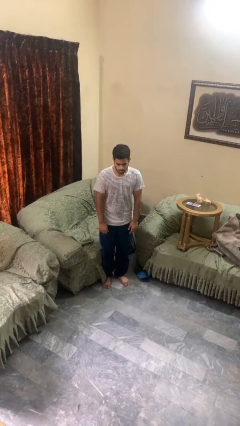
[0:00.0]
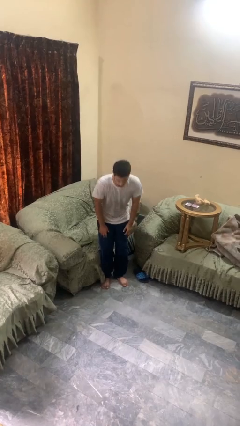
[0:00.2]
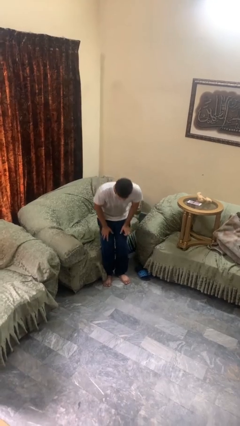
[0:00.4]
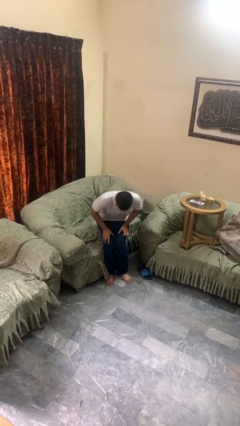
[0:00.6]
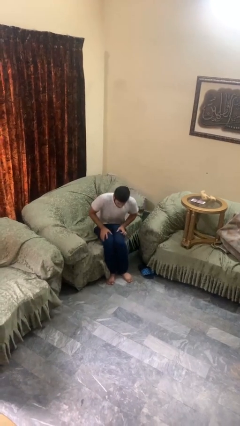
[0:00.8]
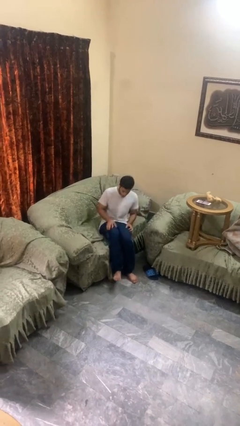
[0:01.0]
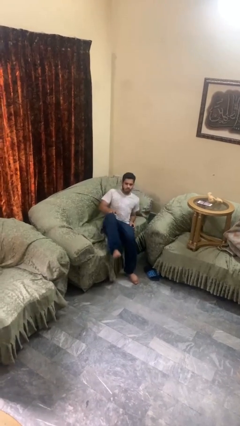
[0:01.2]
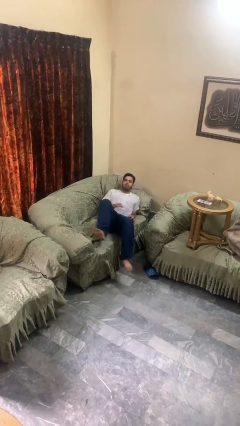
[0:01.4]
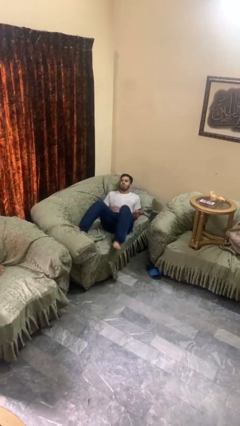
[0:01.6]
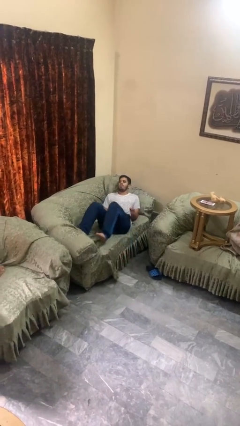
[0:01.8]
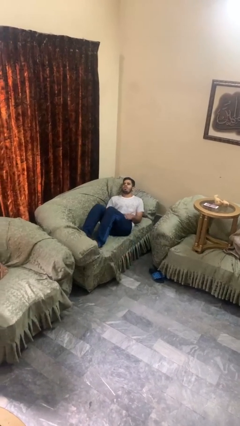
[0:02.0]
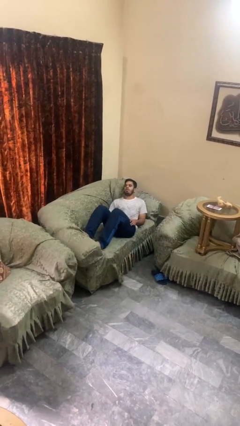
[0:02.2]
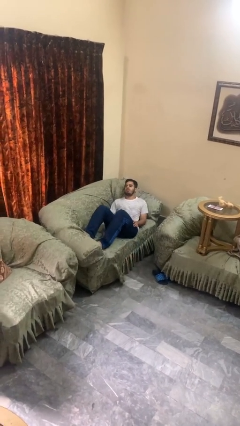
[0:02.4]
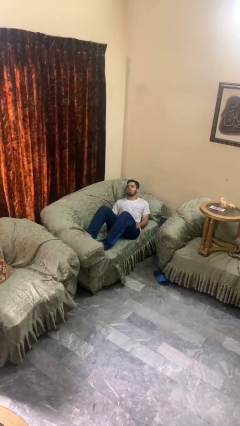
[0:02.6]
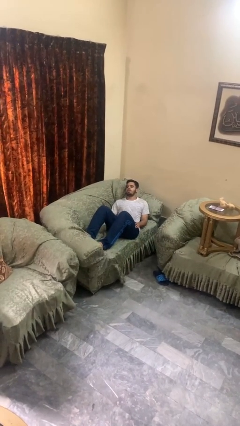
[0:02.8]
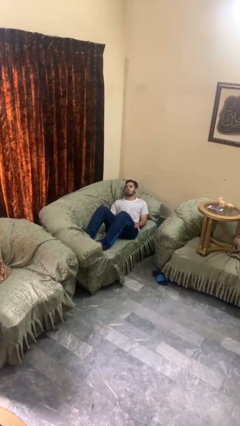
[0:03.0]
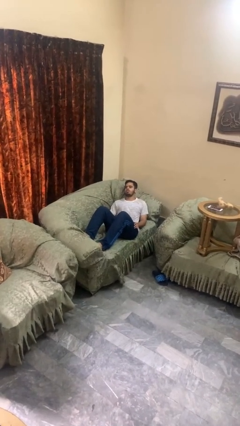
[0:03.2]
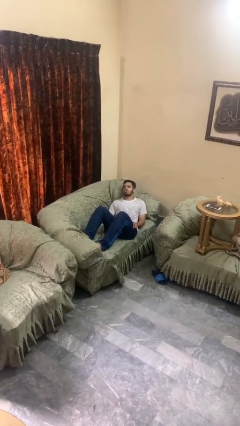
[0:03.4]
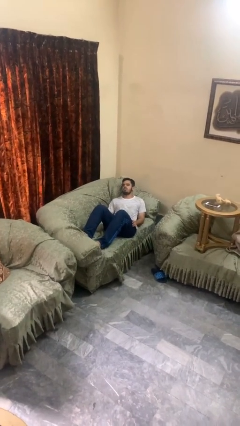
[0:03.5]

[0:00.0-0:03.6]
person lies down on couch

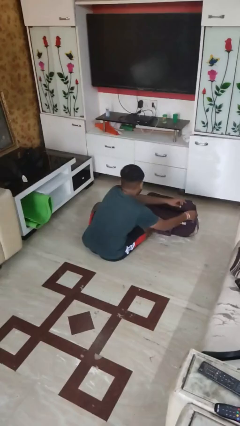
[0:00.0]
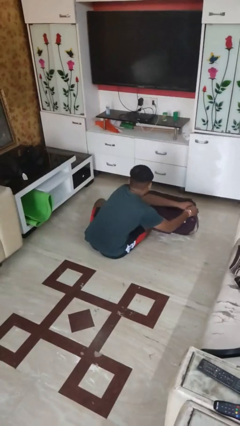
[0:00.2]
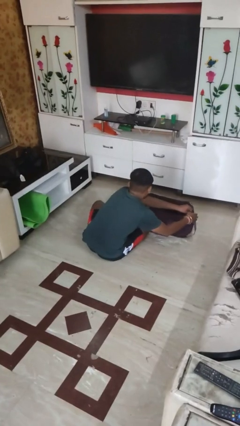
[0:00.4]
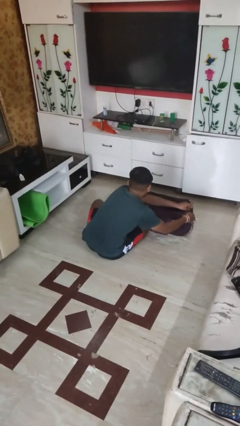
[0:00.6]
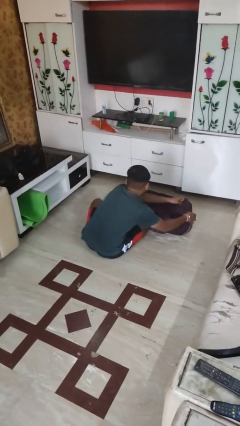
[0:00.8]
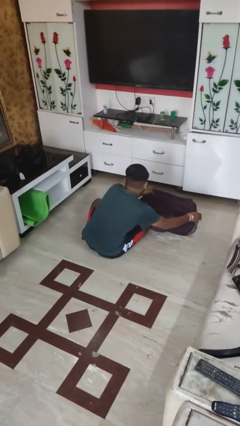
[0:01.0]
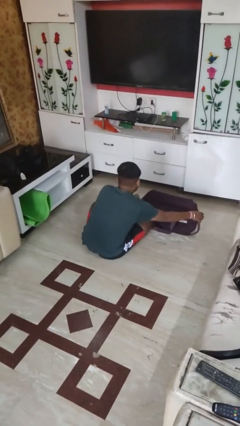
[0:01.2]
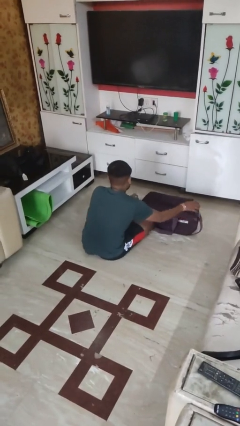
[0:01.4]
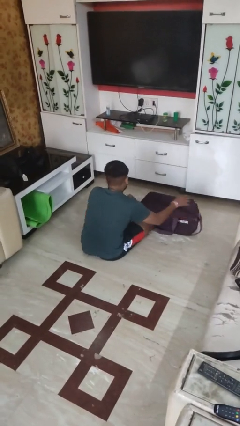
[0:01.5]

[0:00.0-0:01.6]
person closes suitcase

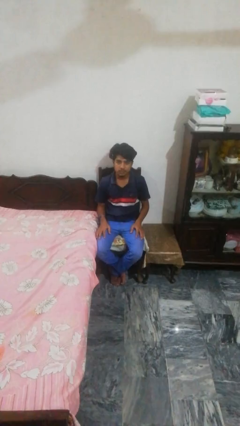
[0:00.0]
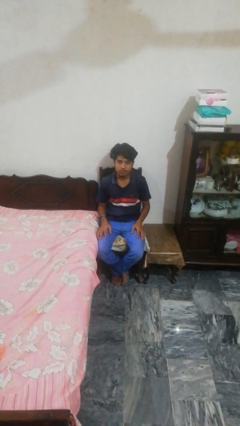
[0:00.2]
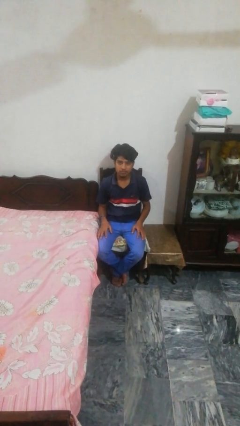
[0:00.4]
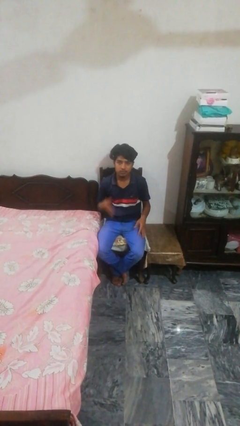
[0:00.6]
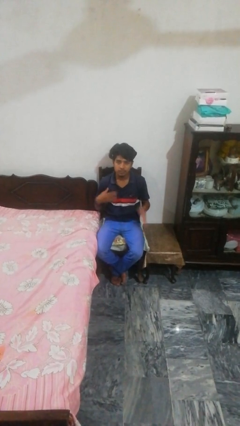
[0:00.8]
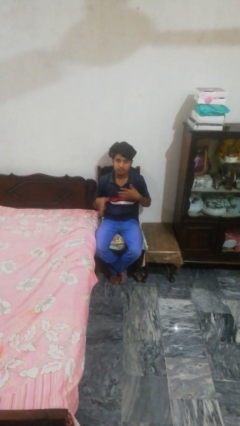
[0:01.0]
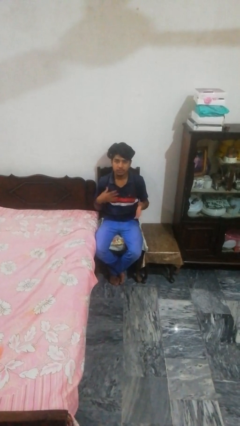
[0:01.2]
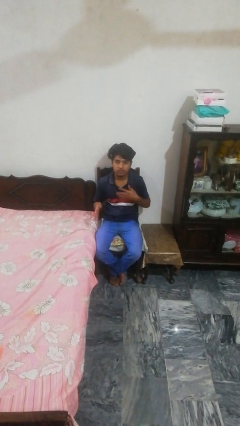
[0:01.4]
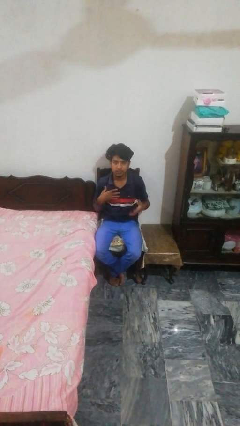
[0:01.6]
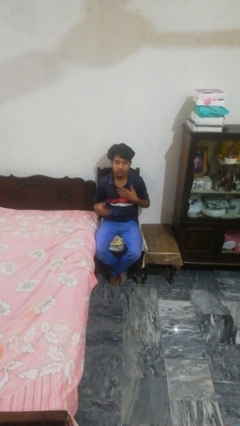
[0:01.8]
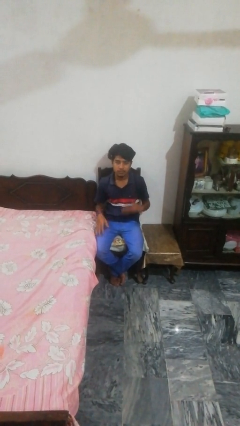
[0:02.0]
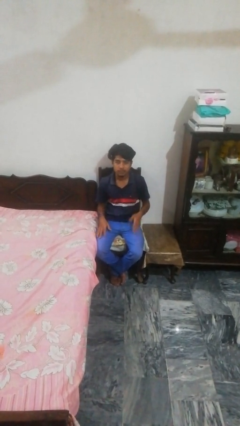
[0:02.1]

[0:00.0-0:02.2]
person drums on chest

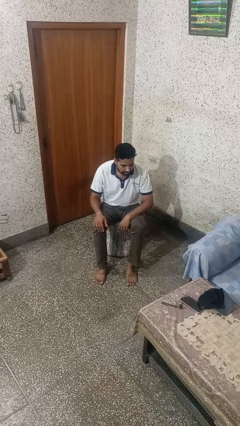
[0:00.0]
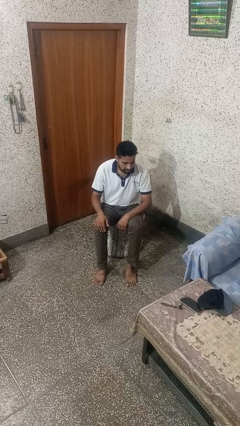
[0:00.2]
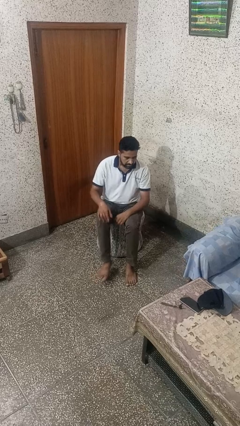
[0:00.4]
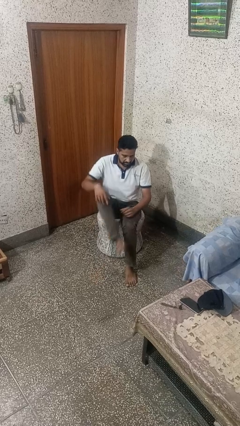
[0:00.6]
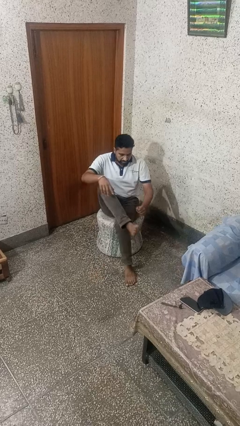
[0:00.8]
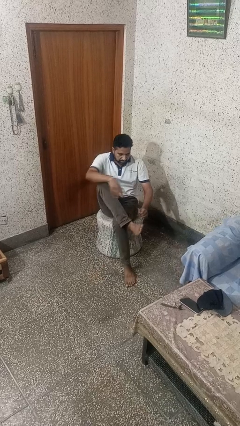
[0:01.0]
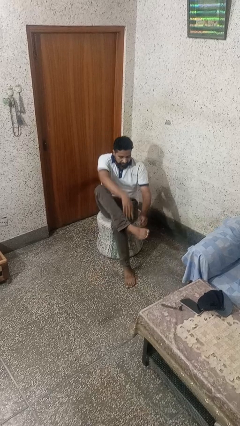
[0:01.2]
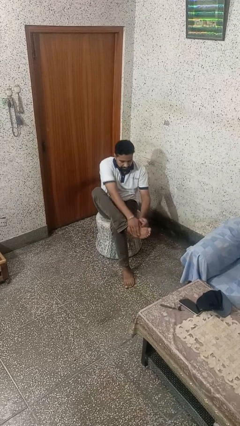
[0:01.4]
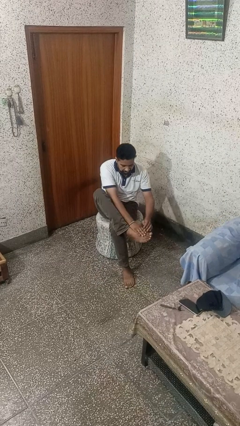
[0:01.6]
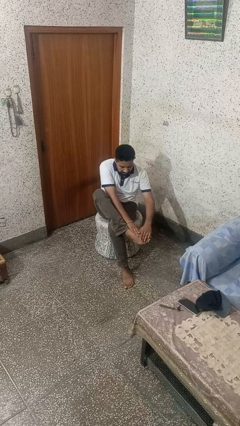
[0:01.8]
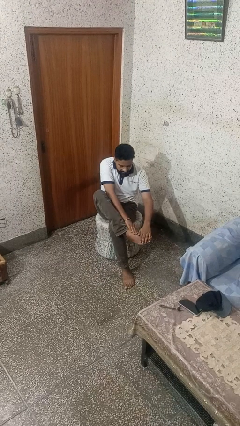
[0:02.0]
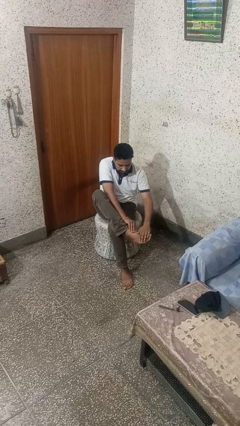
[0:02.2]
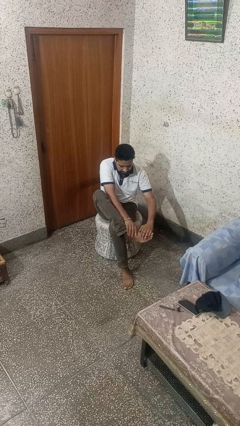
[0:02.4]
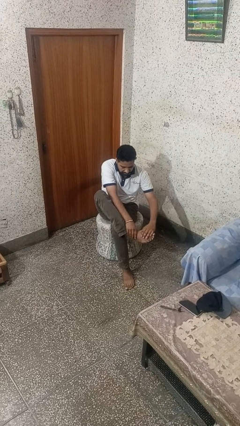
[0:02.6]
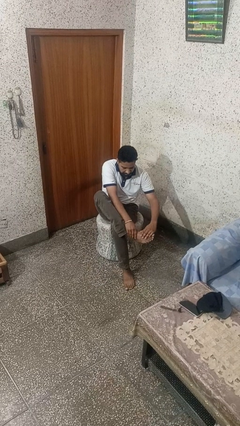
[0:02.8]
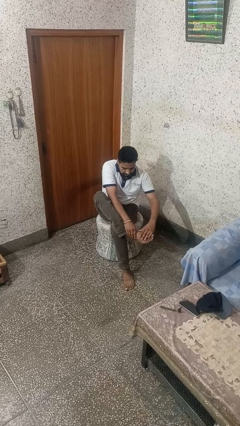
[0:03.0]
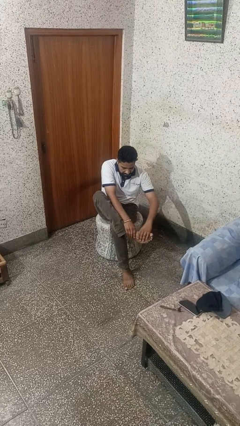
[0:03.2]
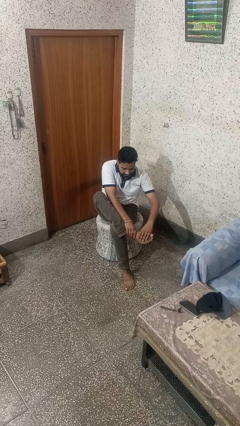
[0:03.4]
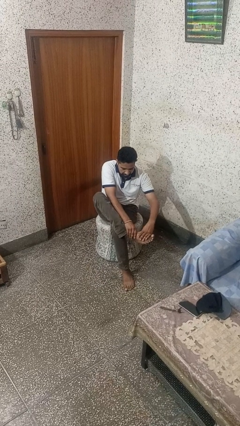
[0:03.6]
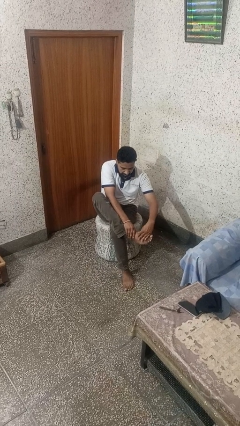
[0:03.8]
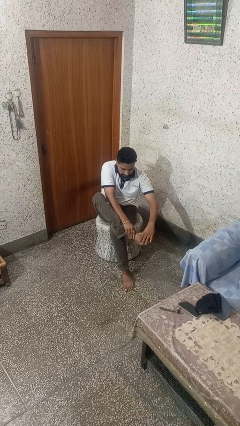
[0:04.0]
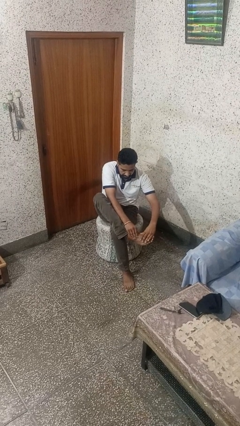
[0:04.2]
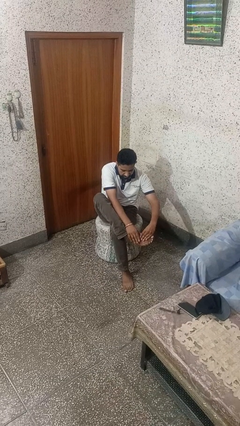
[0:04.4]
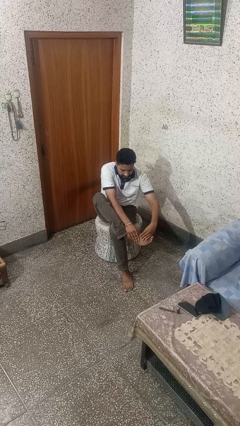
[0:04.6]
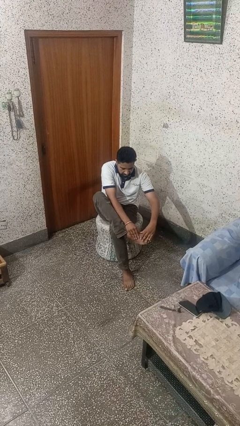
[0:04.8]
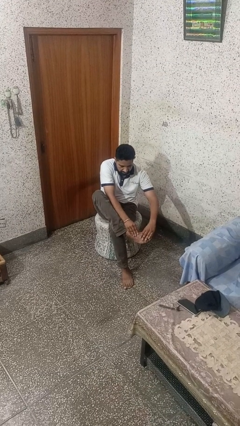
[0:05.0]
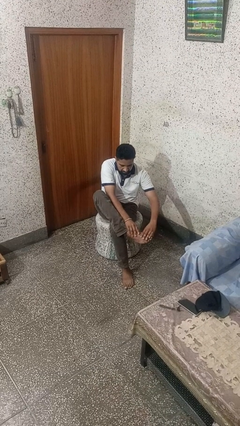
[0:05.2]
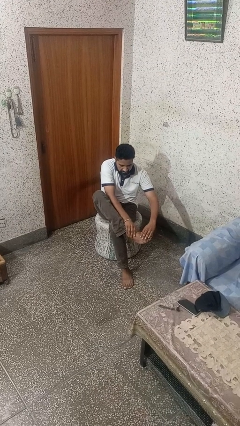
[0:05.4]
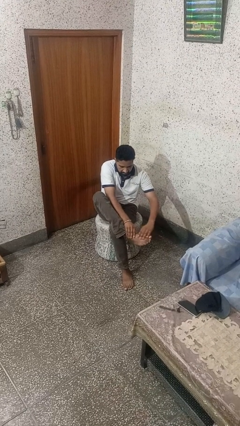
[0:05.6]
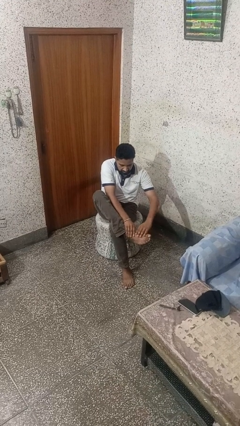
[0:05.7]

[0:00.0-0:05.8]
person rubs foot

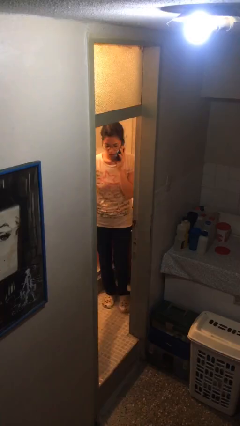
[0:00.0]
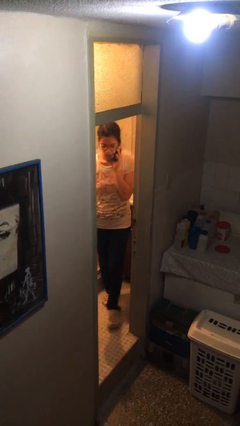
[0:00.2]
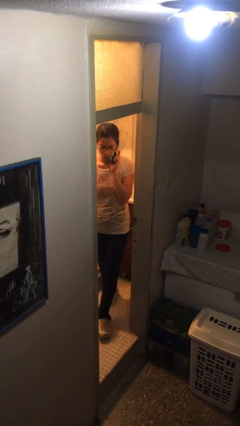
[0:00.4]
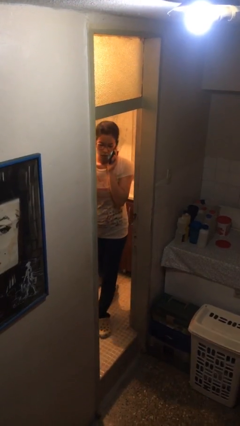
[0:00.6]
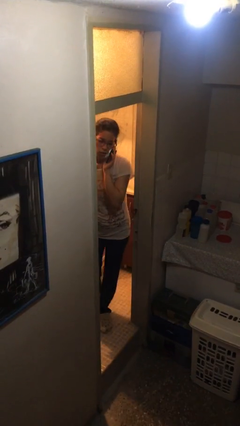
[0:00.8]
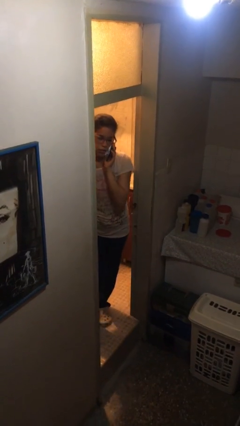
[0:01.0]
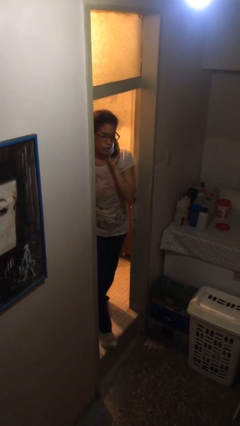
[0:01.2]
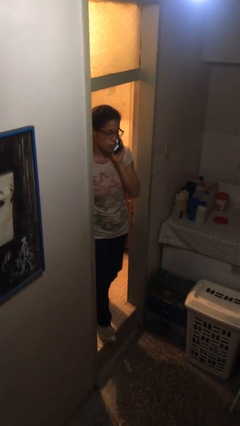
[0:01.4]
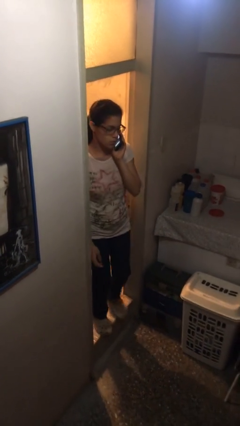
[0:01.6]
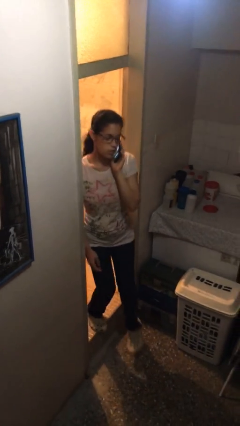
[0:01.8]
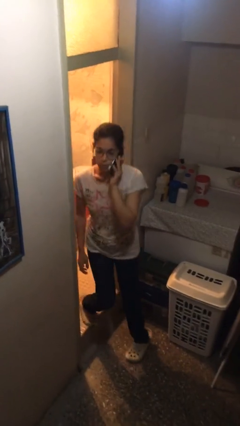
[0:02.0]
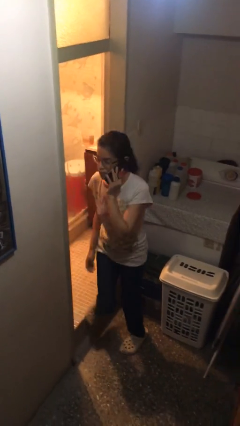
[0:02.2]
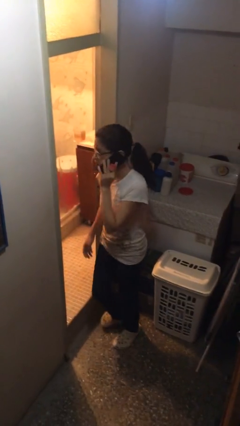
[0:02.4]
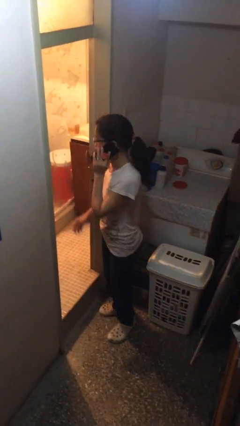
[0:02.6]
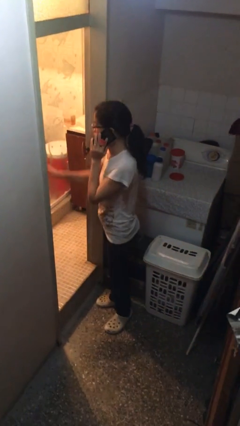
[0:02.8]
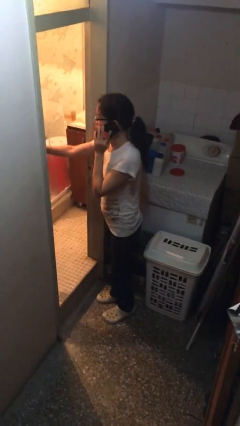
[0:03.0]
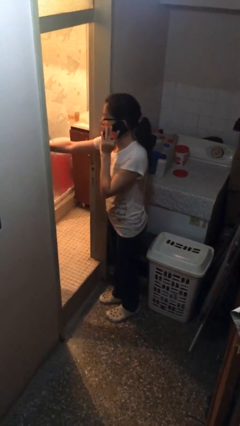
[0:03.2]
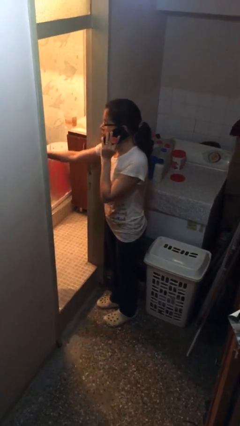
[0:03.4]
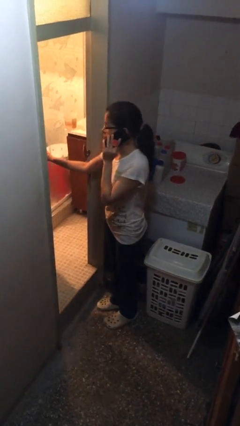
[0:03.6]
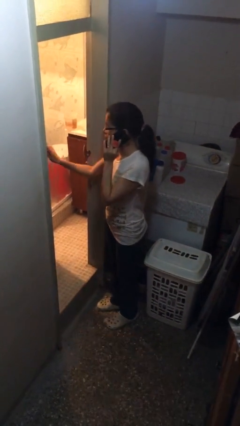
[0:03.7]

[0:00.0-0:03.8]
person enters scene through structure

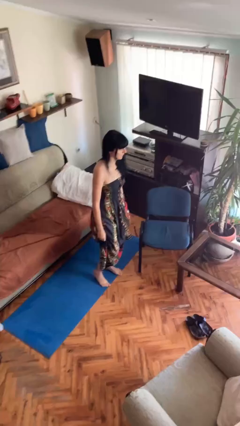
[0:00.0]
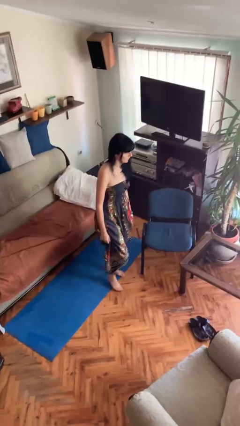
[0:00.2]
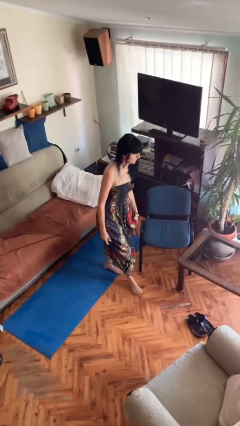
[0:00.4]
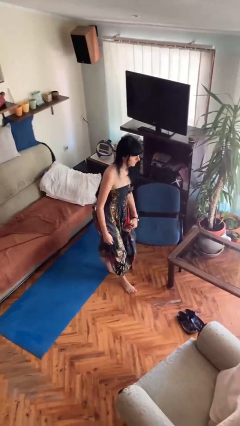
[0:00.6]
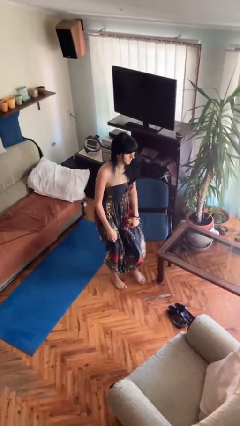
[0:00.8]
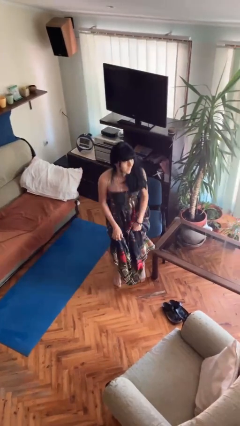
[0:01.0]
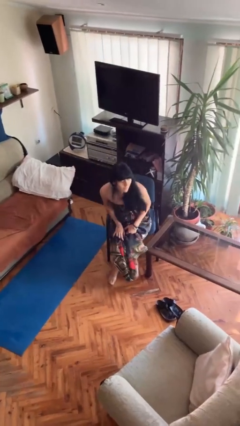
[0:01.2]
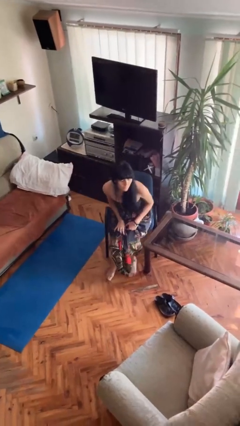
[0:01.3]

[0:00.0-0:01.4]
person sits down
